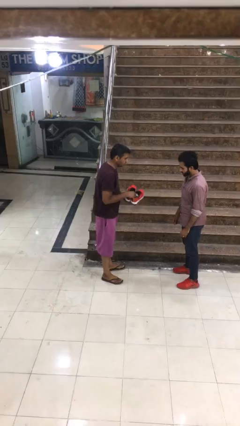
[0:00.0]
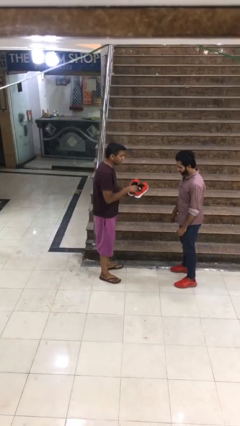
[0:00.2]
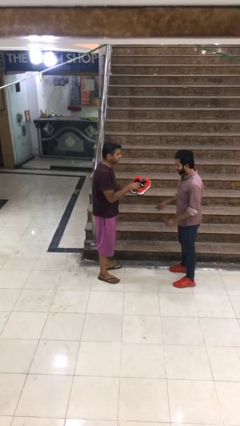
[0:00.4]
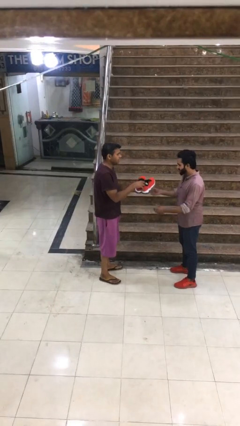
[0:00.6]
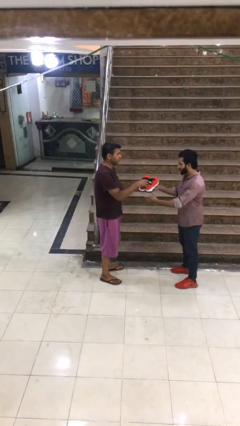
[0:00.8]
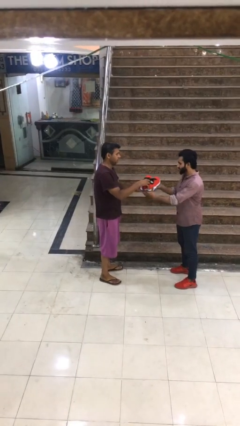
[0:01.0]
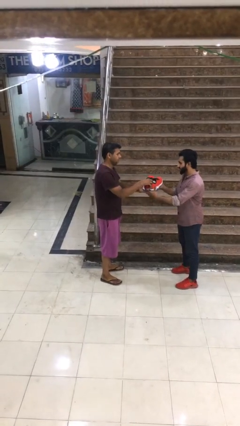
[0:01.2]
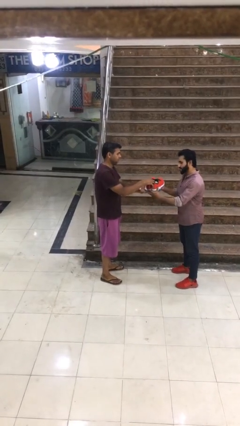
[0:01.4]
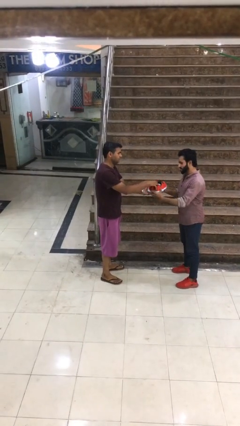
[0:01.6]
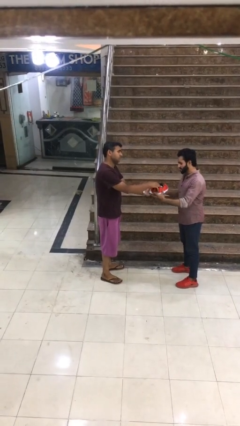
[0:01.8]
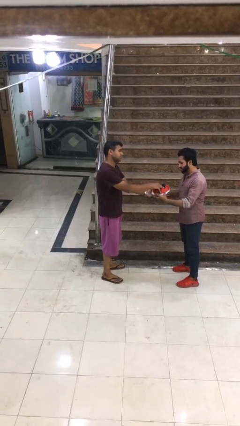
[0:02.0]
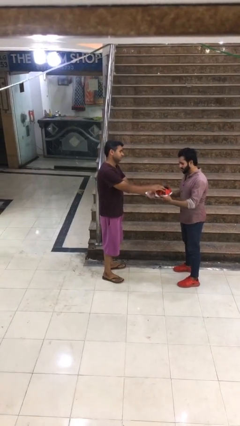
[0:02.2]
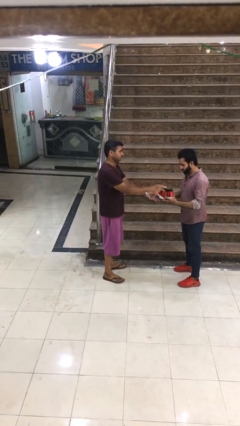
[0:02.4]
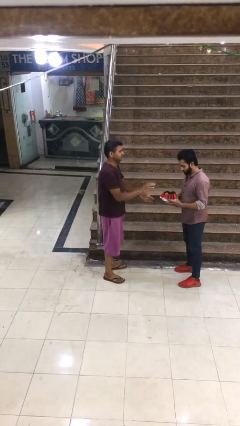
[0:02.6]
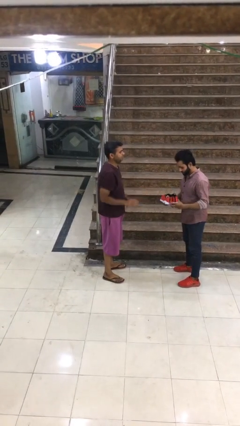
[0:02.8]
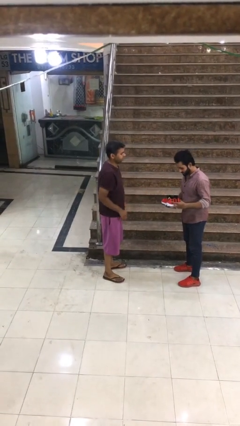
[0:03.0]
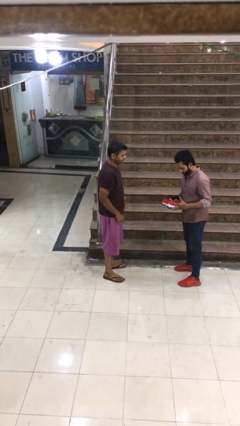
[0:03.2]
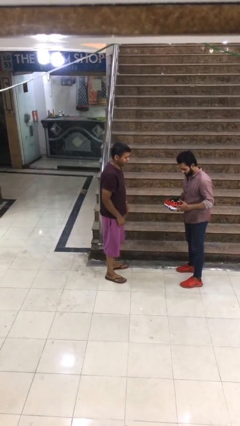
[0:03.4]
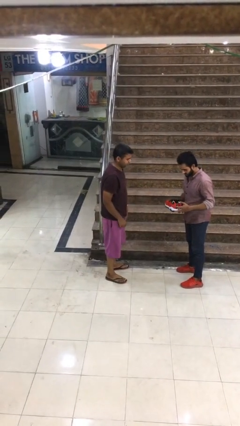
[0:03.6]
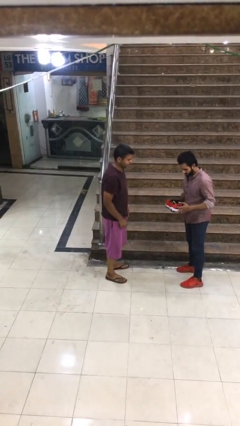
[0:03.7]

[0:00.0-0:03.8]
person transfers object to person

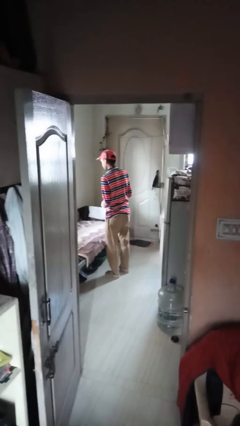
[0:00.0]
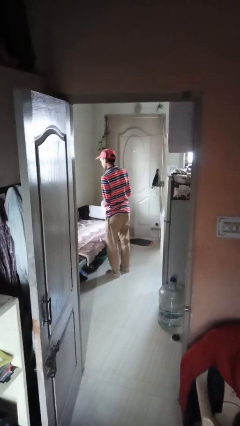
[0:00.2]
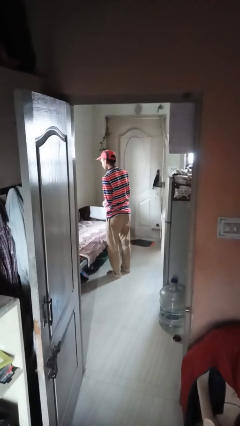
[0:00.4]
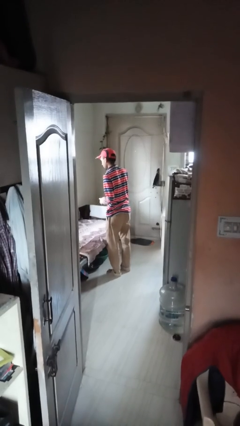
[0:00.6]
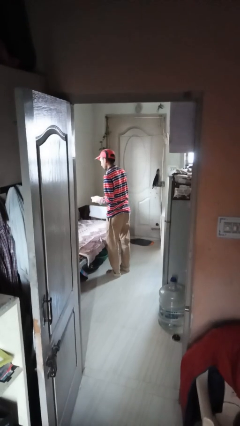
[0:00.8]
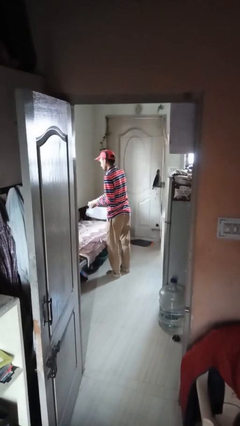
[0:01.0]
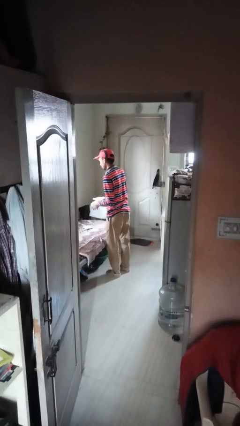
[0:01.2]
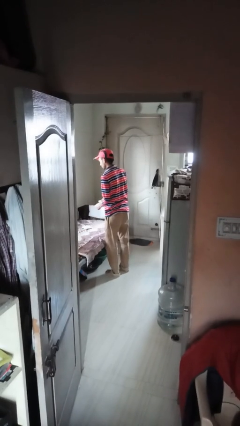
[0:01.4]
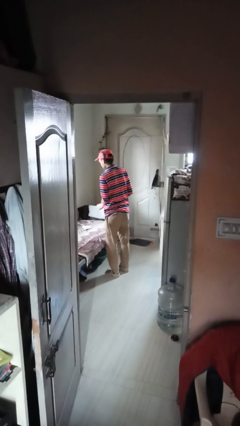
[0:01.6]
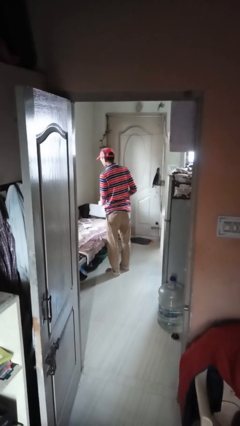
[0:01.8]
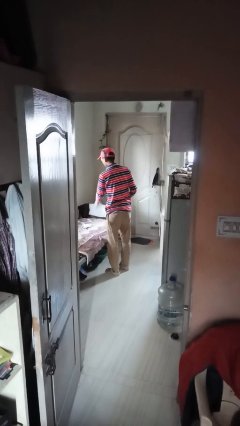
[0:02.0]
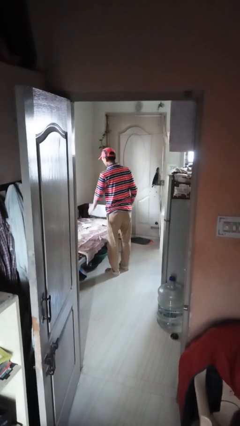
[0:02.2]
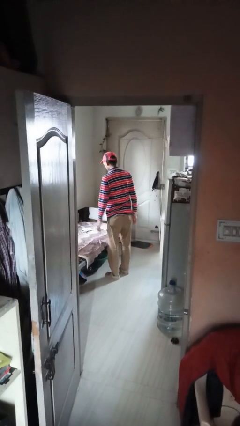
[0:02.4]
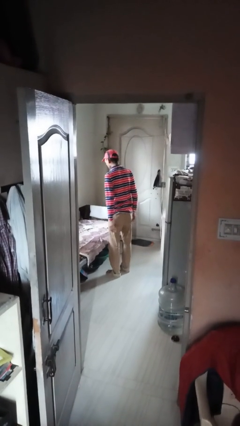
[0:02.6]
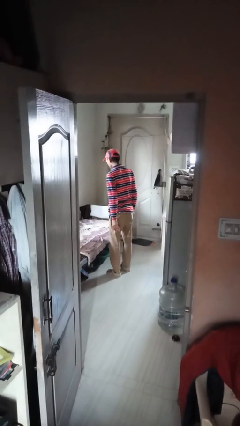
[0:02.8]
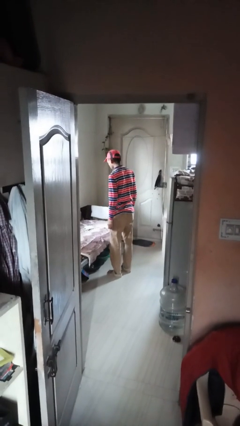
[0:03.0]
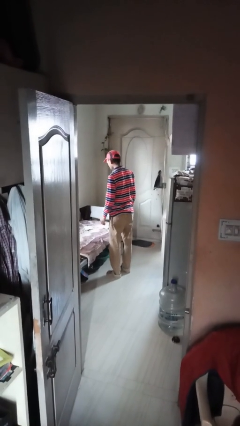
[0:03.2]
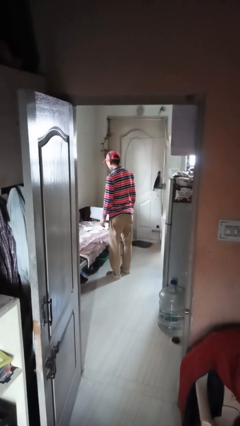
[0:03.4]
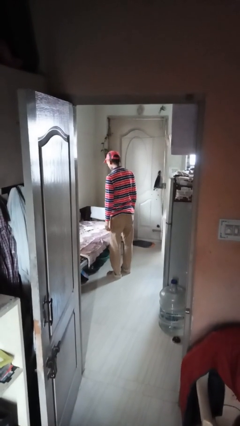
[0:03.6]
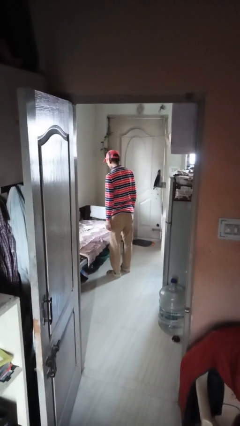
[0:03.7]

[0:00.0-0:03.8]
person takes off gloves

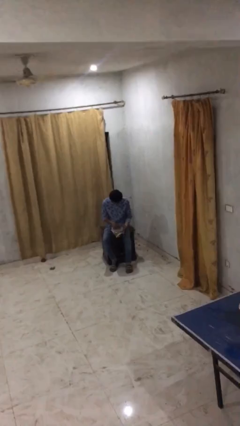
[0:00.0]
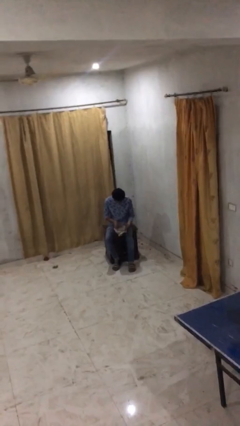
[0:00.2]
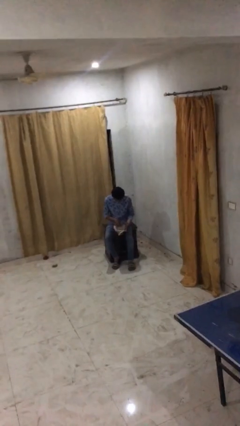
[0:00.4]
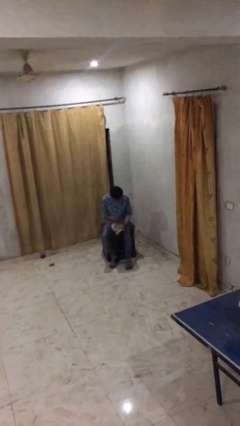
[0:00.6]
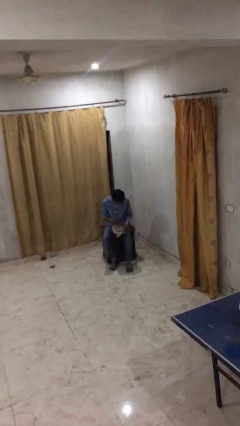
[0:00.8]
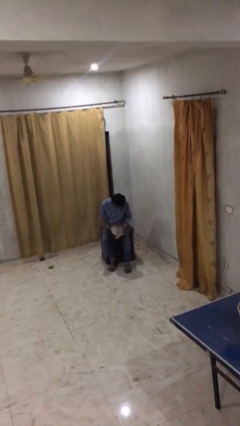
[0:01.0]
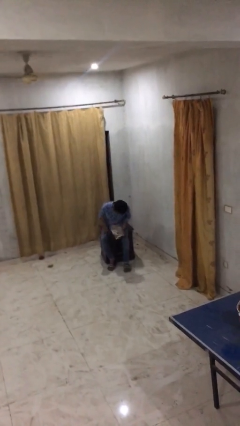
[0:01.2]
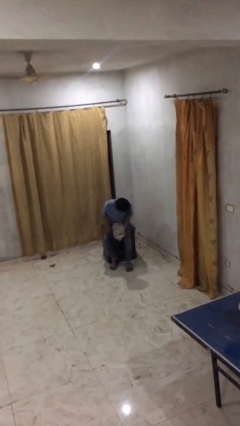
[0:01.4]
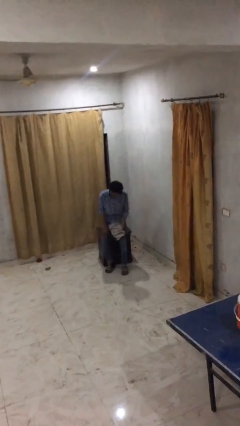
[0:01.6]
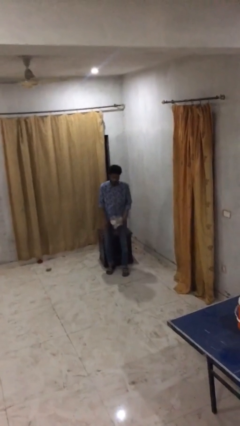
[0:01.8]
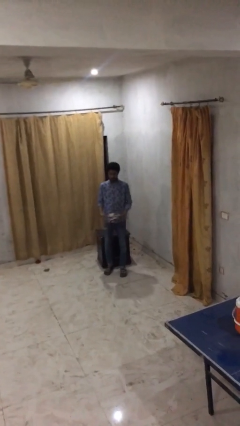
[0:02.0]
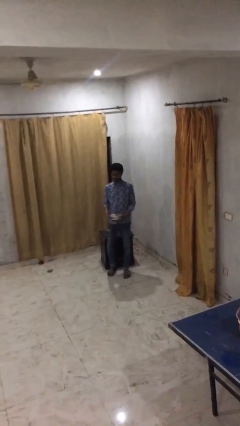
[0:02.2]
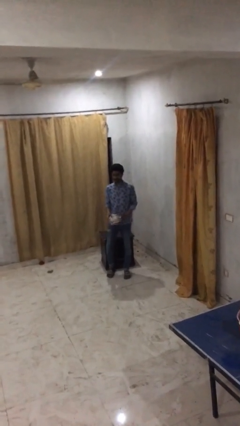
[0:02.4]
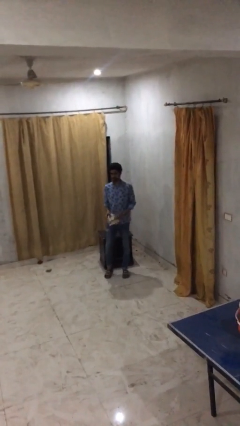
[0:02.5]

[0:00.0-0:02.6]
person stands up

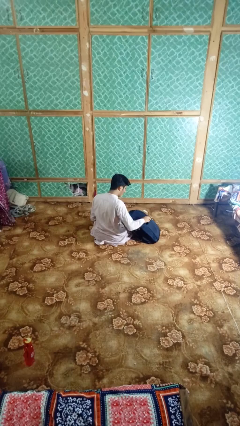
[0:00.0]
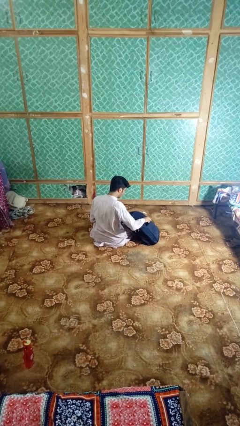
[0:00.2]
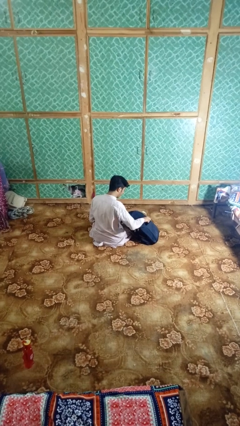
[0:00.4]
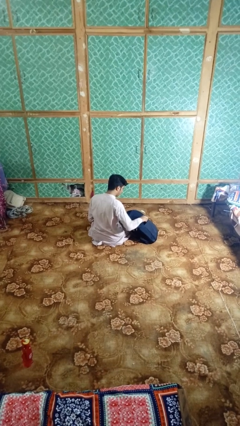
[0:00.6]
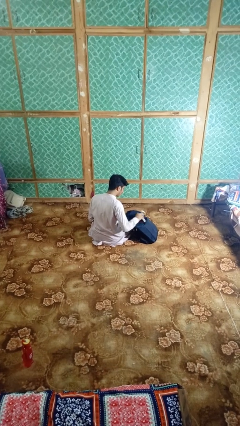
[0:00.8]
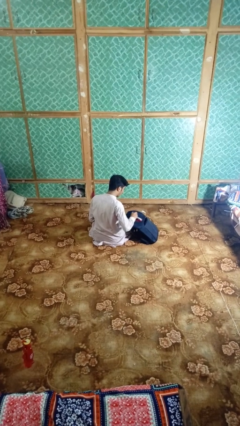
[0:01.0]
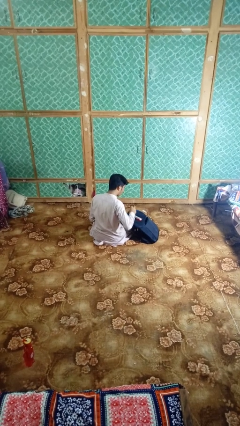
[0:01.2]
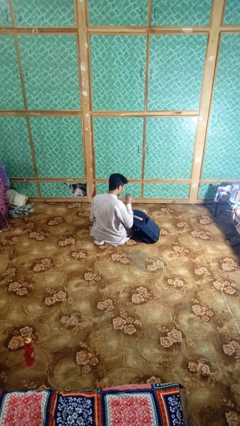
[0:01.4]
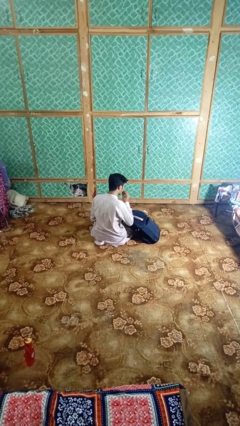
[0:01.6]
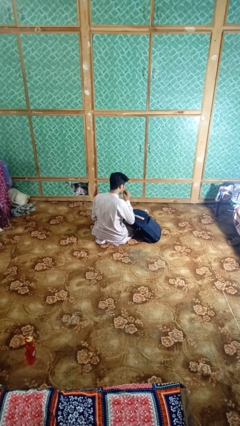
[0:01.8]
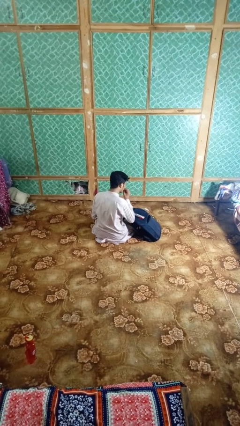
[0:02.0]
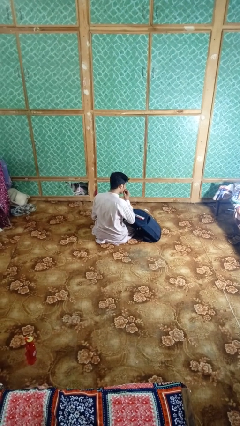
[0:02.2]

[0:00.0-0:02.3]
person eats snack from bag

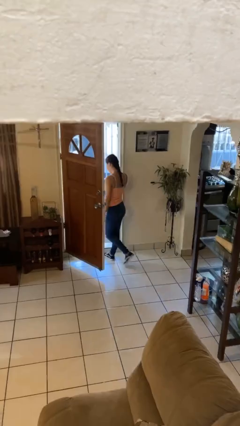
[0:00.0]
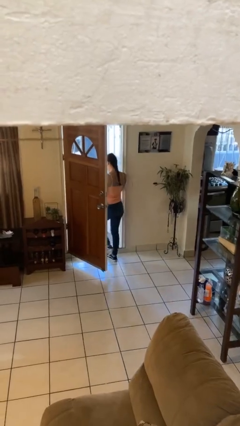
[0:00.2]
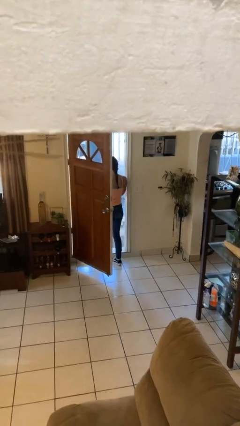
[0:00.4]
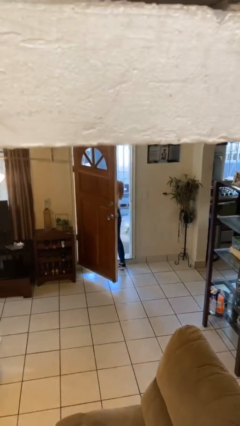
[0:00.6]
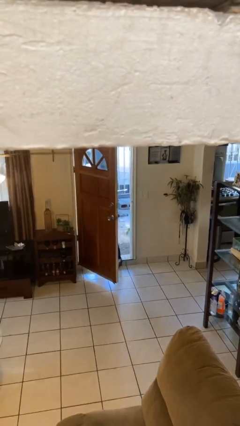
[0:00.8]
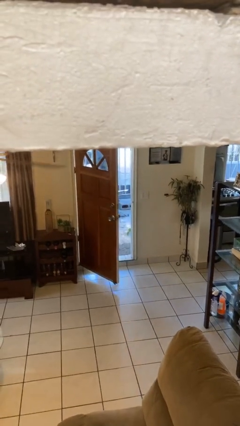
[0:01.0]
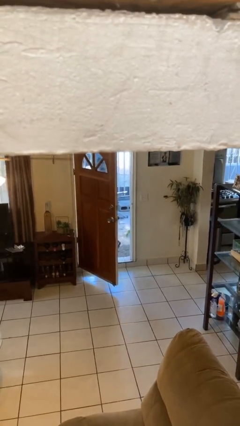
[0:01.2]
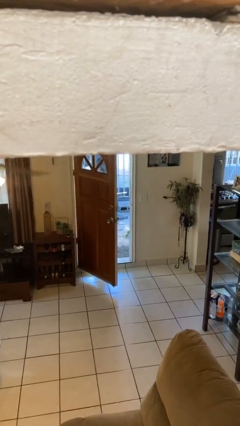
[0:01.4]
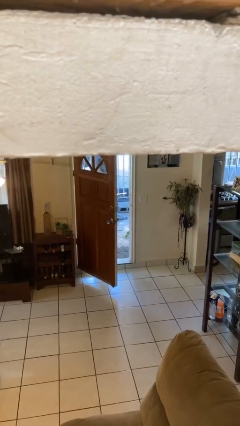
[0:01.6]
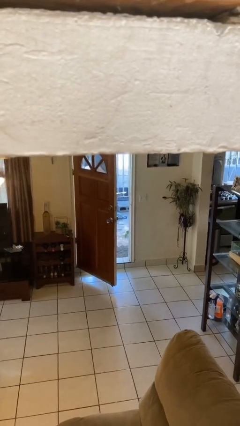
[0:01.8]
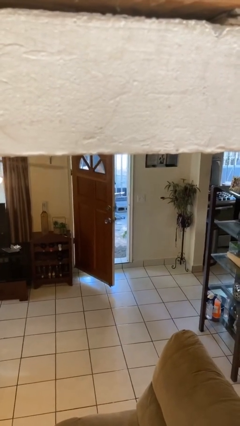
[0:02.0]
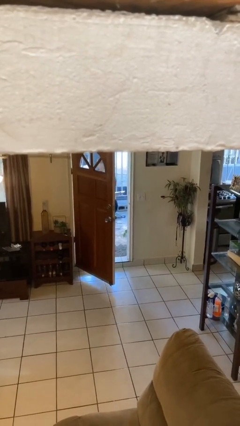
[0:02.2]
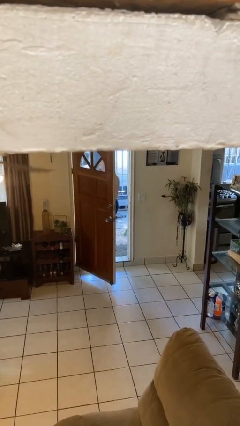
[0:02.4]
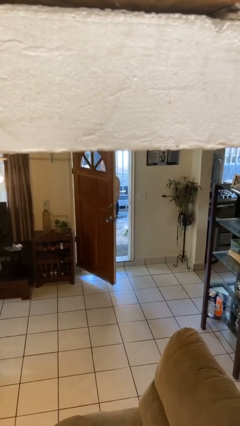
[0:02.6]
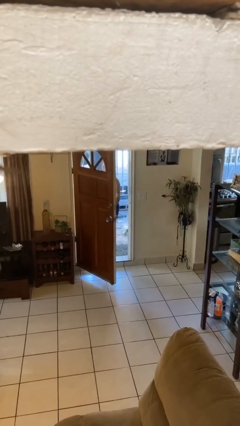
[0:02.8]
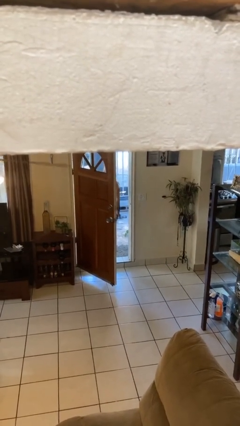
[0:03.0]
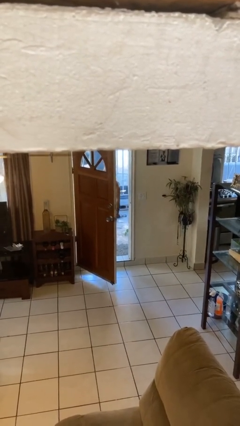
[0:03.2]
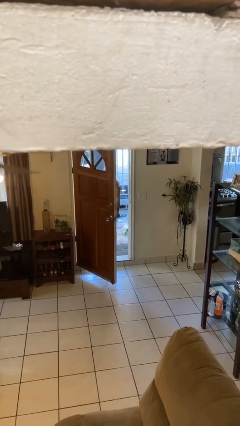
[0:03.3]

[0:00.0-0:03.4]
person exits scene through structure

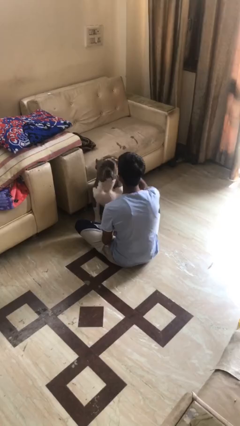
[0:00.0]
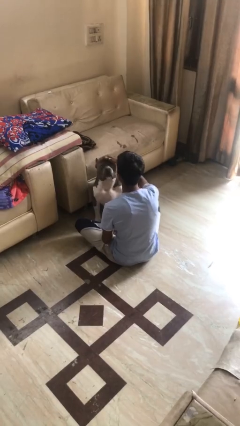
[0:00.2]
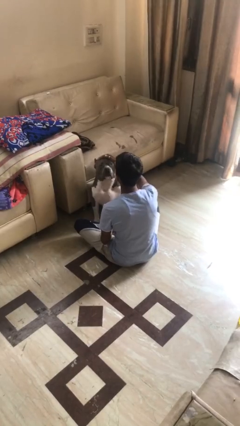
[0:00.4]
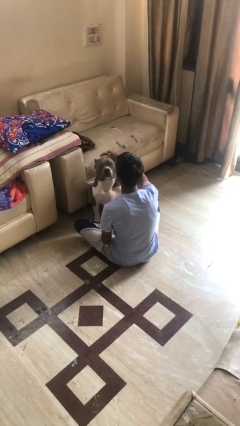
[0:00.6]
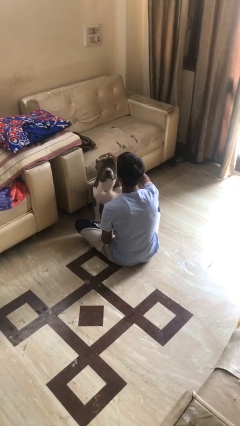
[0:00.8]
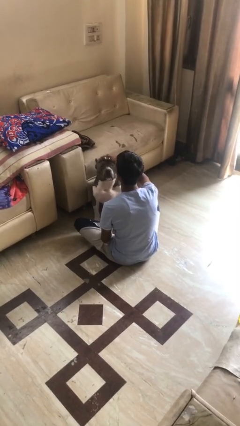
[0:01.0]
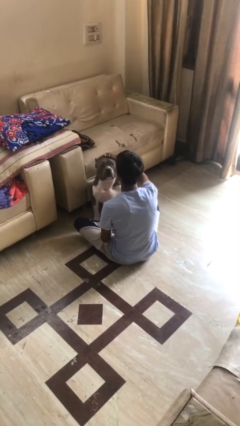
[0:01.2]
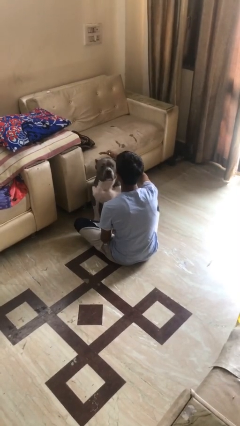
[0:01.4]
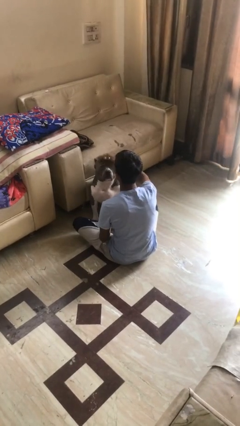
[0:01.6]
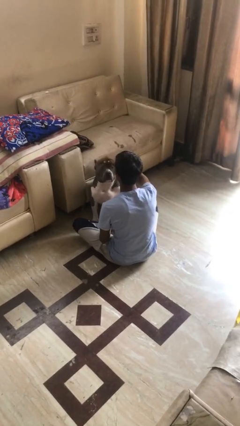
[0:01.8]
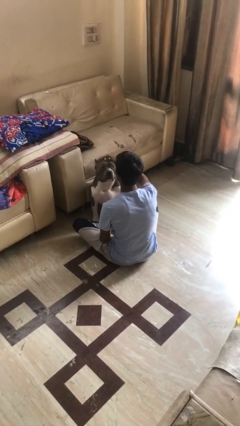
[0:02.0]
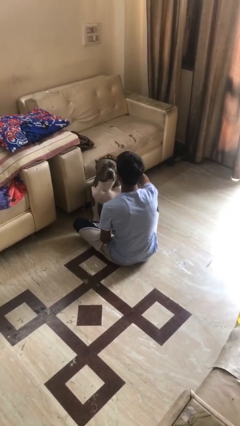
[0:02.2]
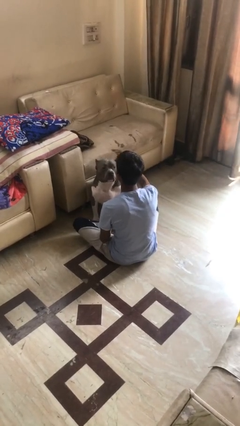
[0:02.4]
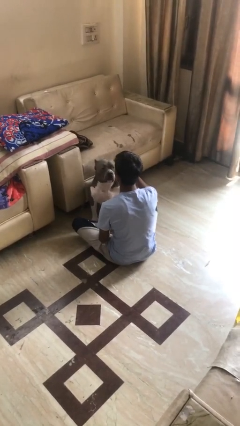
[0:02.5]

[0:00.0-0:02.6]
person pets dog
